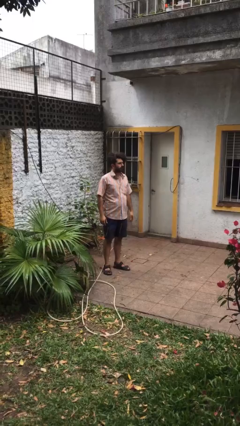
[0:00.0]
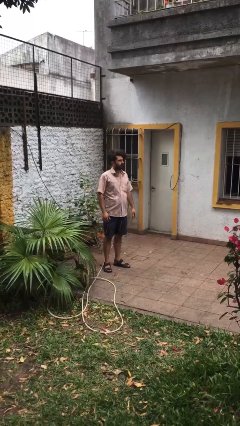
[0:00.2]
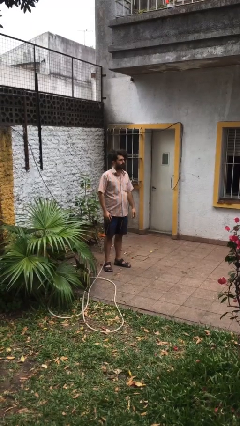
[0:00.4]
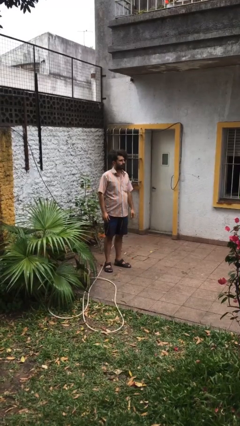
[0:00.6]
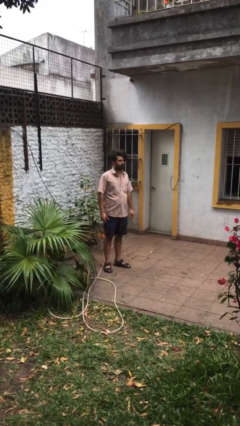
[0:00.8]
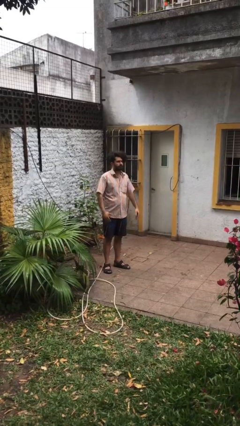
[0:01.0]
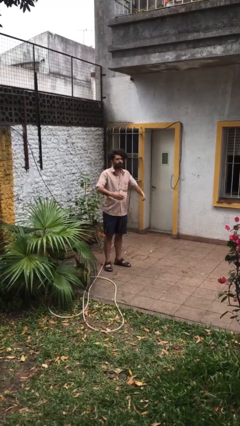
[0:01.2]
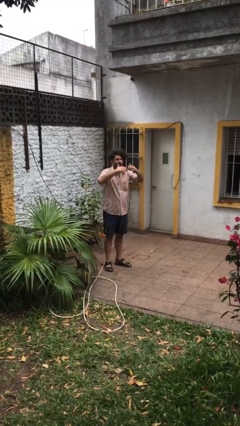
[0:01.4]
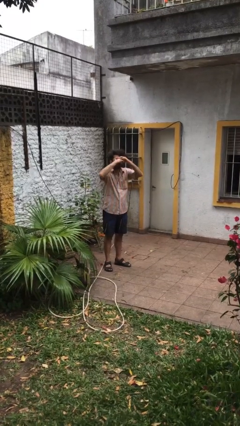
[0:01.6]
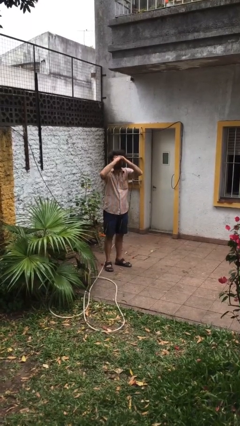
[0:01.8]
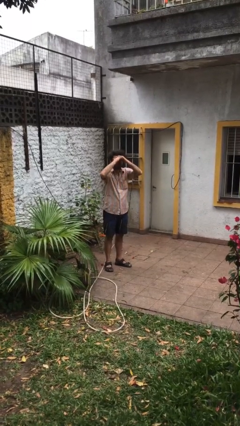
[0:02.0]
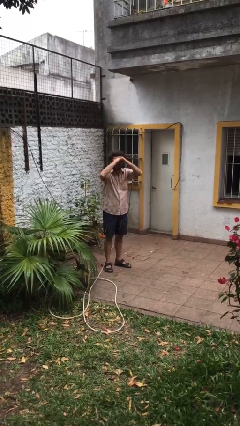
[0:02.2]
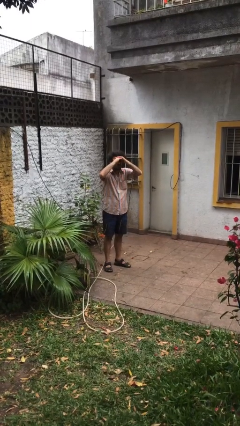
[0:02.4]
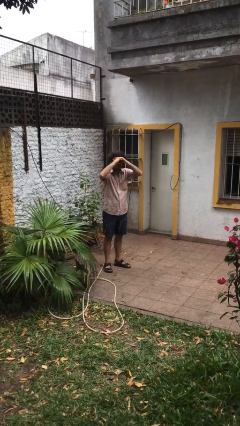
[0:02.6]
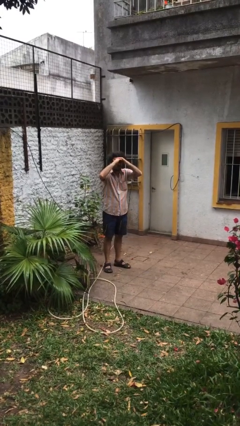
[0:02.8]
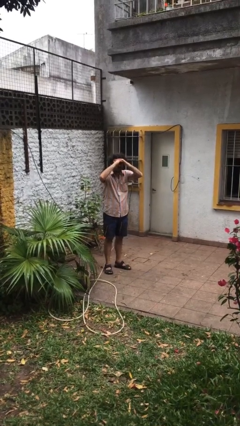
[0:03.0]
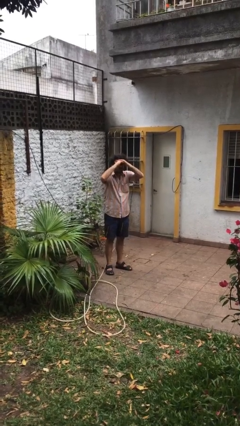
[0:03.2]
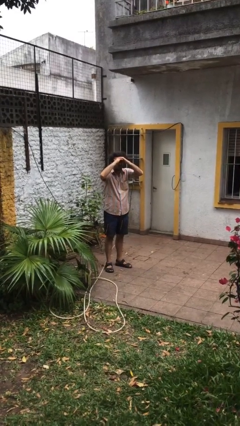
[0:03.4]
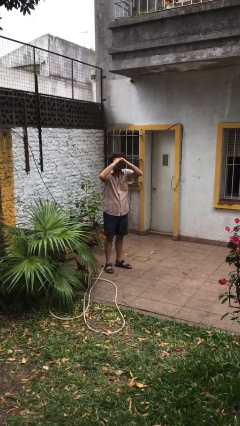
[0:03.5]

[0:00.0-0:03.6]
person shades eyes

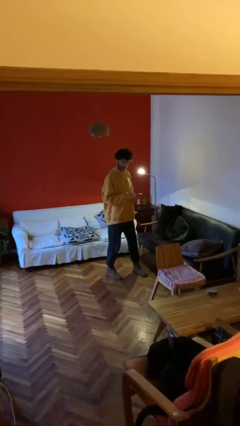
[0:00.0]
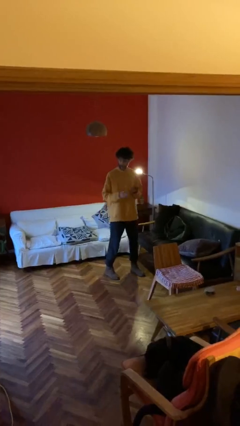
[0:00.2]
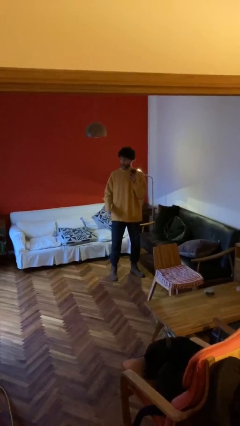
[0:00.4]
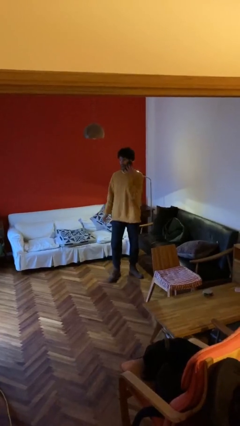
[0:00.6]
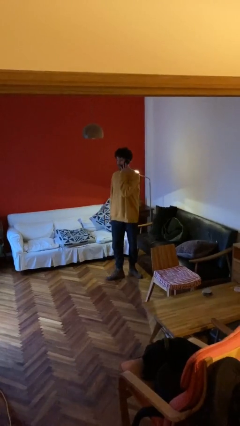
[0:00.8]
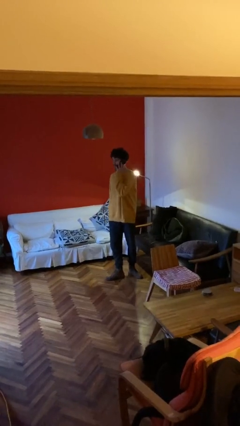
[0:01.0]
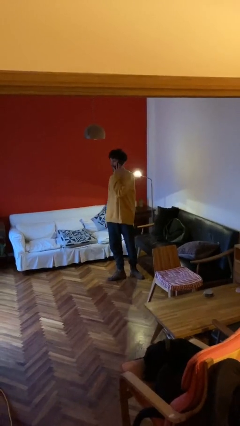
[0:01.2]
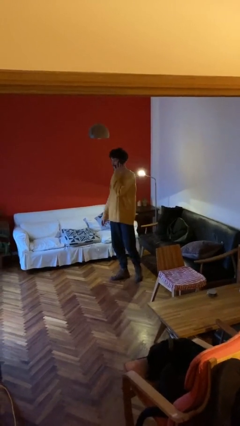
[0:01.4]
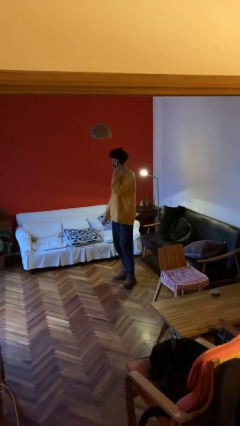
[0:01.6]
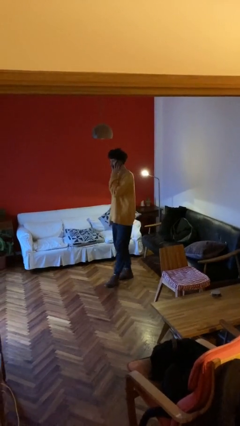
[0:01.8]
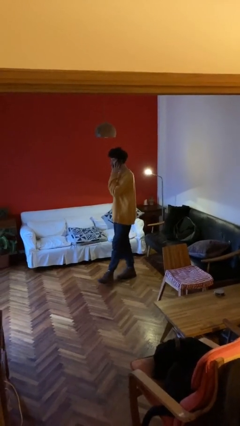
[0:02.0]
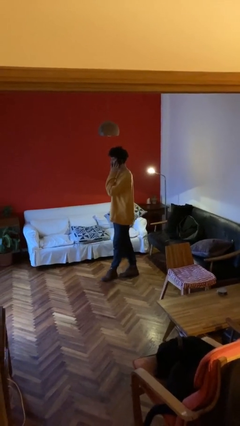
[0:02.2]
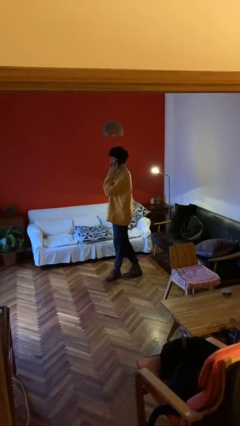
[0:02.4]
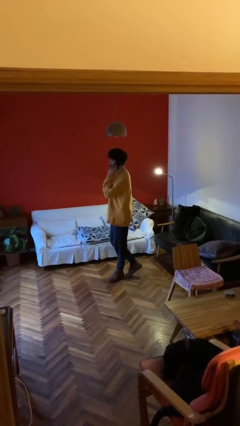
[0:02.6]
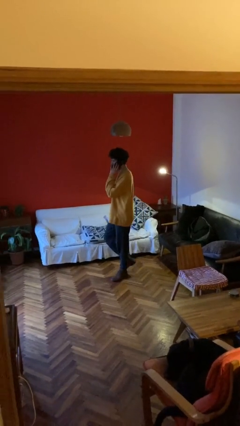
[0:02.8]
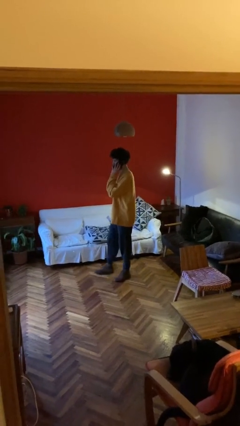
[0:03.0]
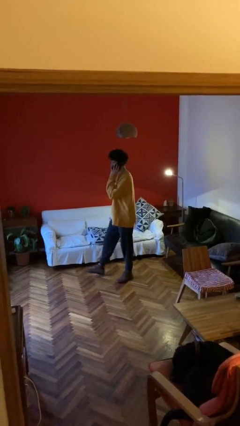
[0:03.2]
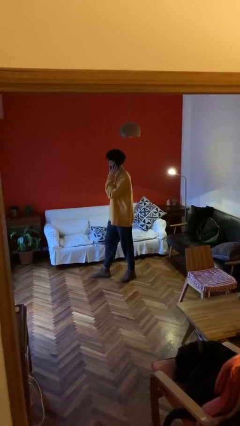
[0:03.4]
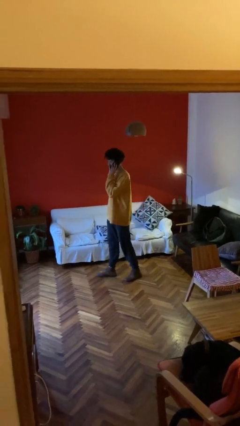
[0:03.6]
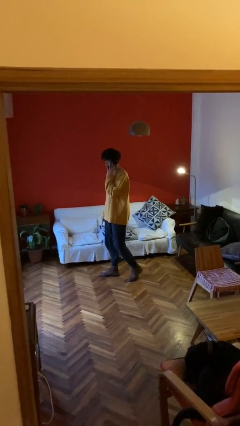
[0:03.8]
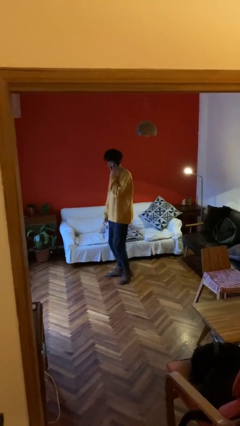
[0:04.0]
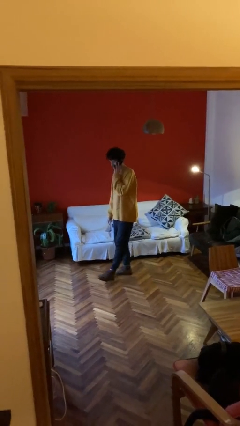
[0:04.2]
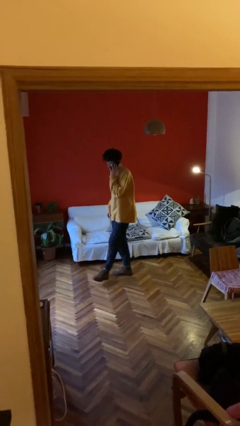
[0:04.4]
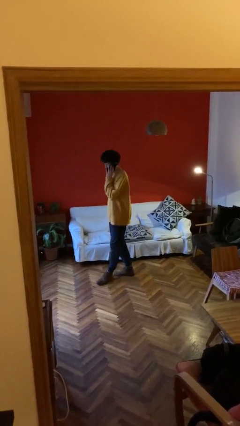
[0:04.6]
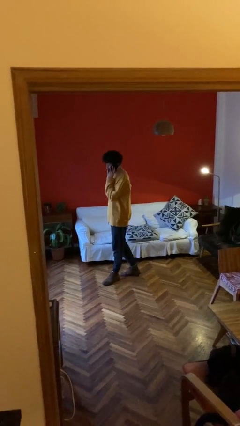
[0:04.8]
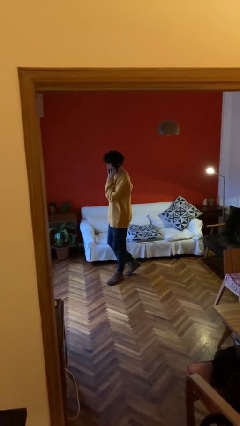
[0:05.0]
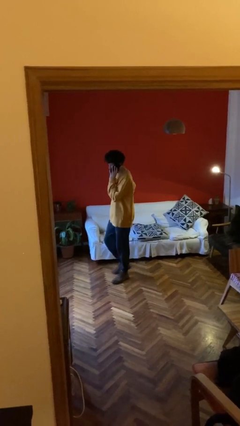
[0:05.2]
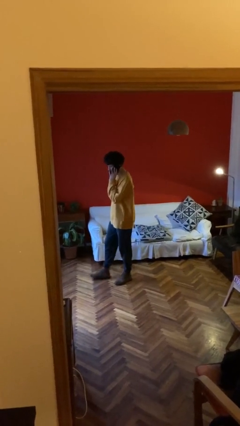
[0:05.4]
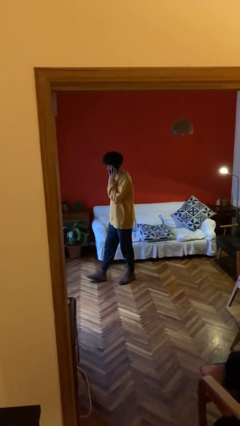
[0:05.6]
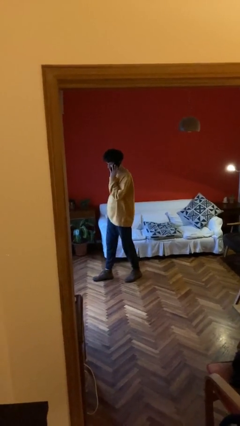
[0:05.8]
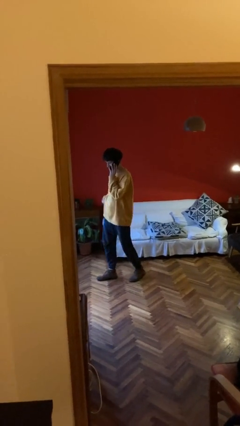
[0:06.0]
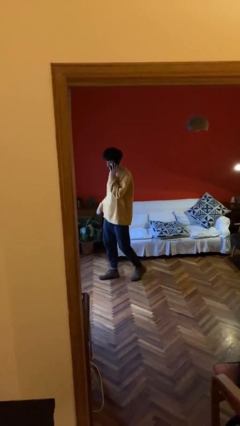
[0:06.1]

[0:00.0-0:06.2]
person talks on phone

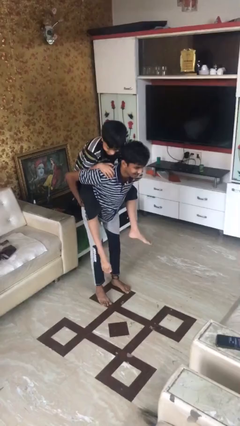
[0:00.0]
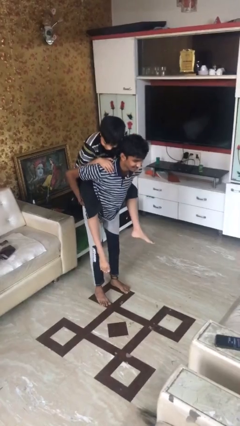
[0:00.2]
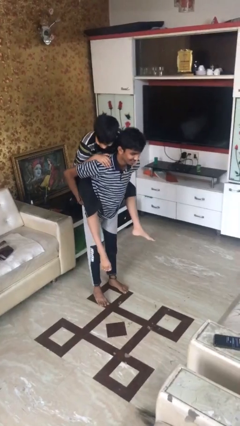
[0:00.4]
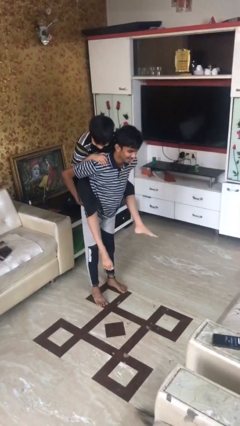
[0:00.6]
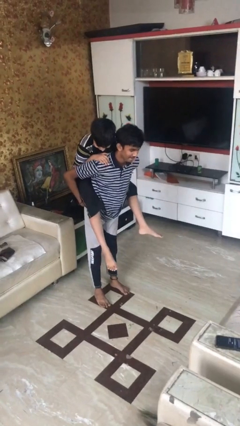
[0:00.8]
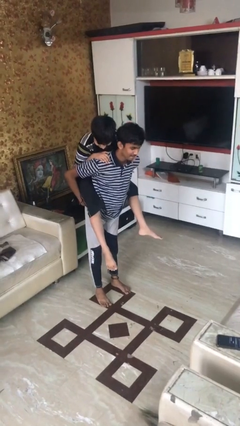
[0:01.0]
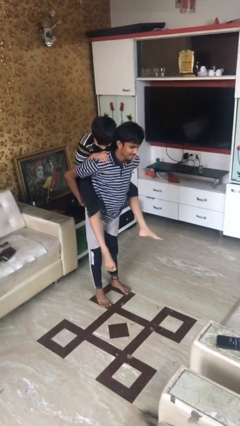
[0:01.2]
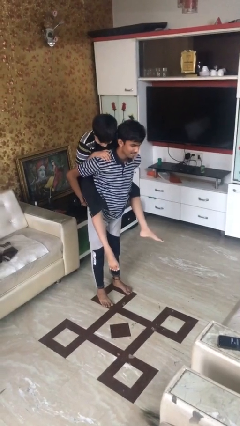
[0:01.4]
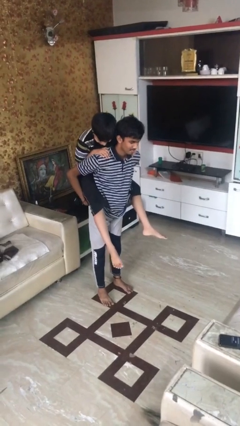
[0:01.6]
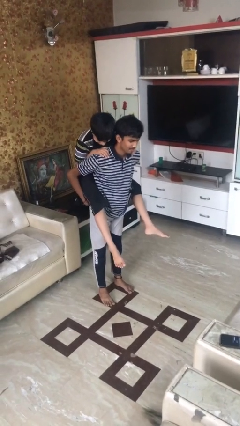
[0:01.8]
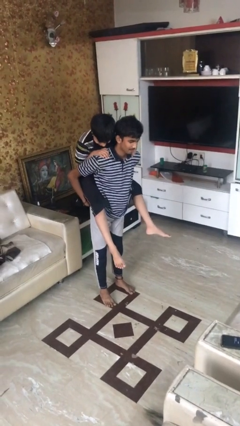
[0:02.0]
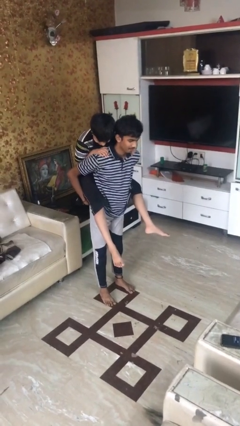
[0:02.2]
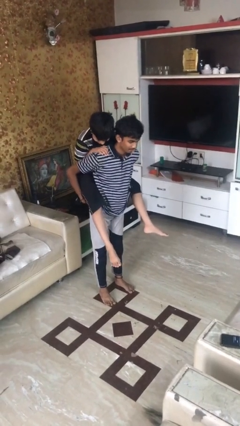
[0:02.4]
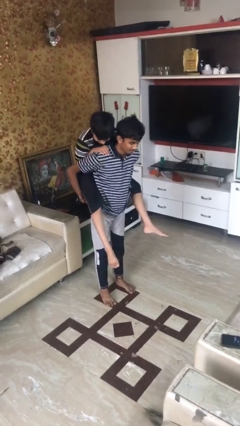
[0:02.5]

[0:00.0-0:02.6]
person carries person over shoulder

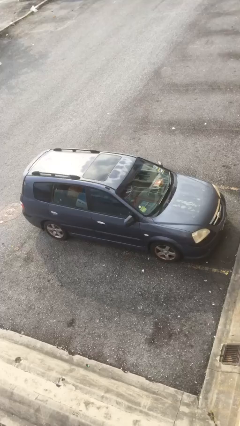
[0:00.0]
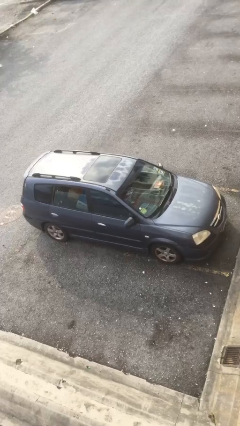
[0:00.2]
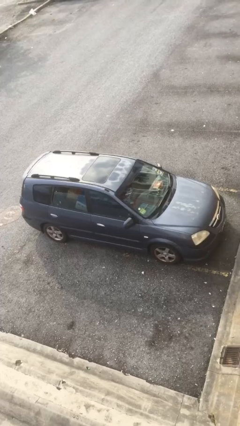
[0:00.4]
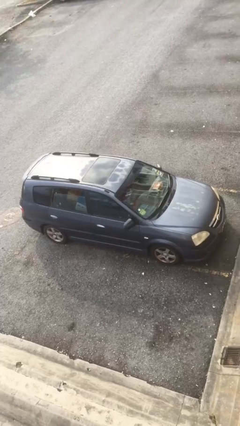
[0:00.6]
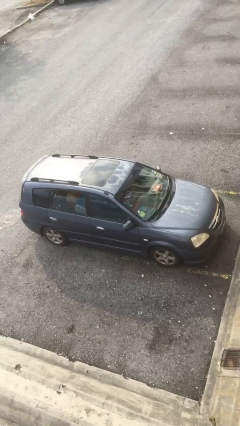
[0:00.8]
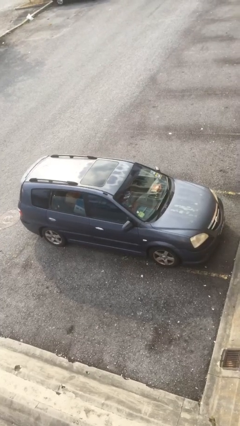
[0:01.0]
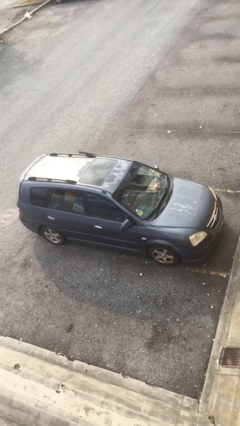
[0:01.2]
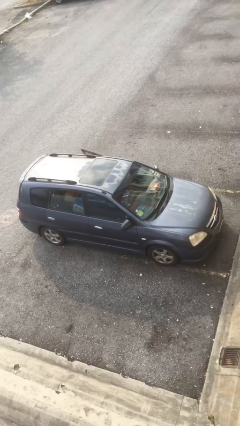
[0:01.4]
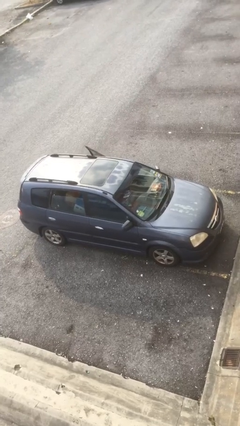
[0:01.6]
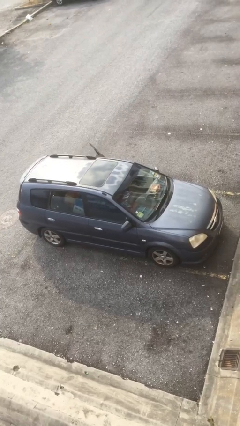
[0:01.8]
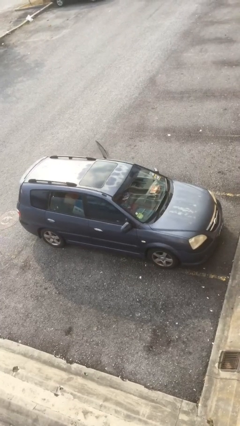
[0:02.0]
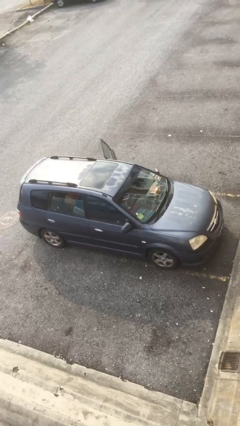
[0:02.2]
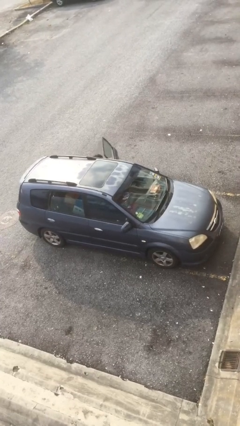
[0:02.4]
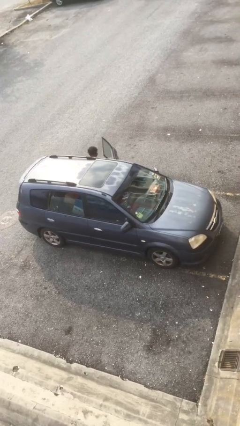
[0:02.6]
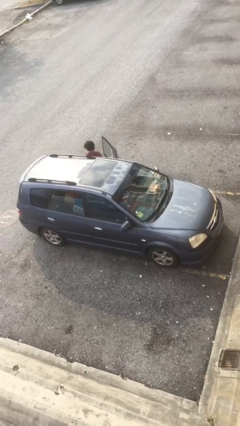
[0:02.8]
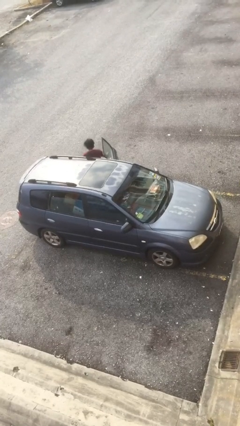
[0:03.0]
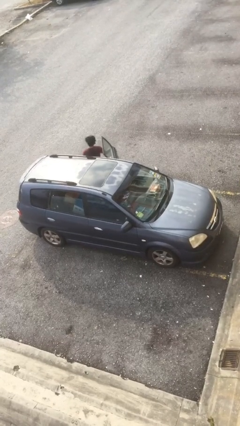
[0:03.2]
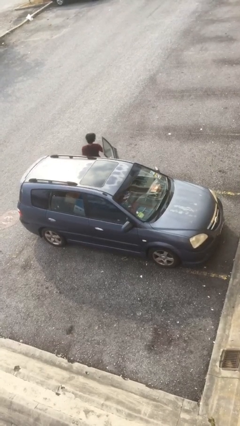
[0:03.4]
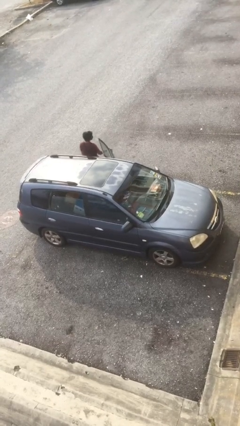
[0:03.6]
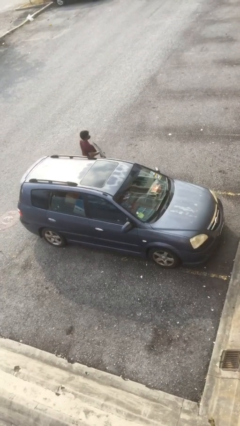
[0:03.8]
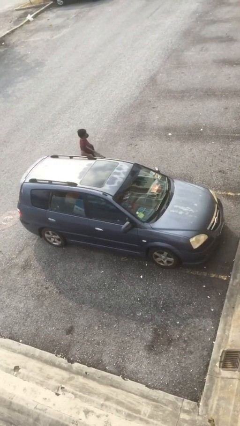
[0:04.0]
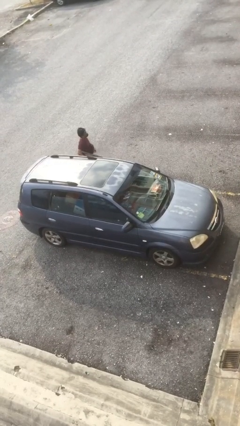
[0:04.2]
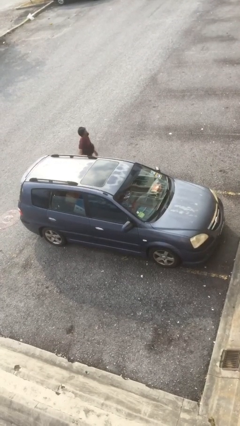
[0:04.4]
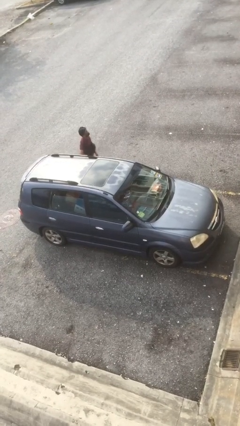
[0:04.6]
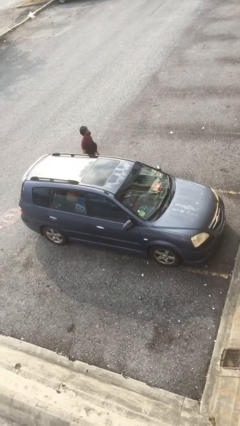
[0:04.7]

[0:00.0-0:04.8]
car drops off person

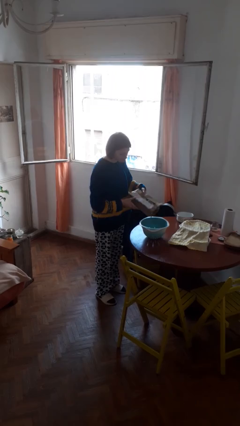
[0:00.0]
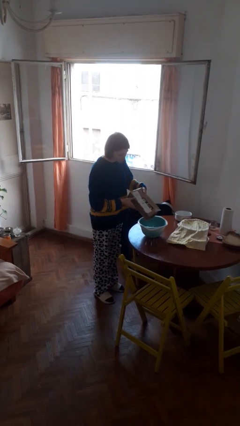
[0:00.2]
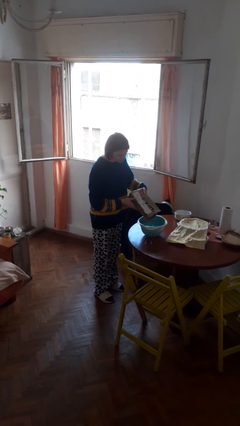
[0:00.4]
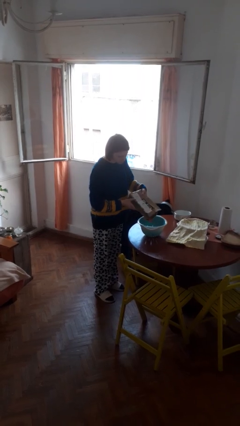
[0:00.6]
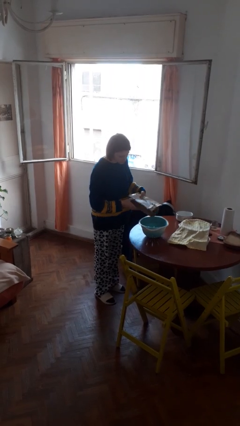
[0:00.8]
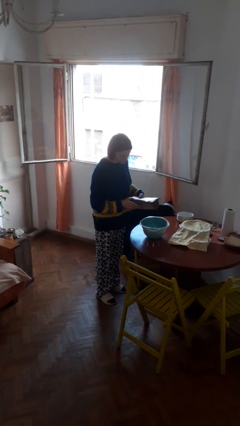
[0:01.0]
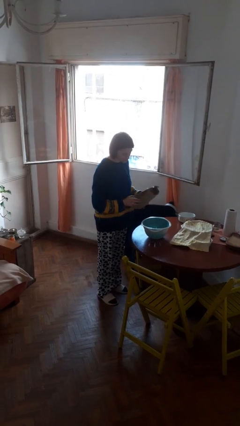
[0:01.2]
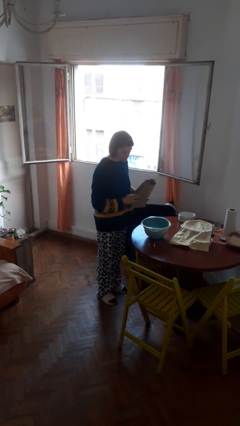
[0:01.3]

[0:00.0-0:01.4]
person pours into bowl
